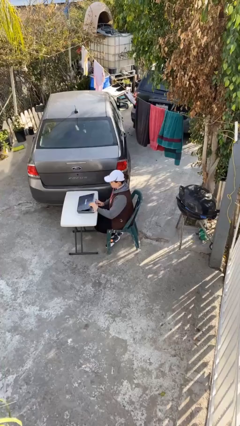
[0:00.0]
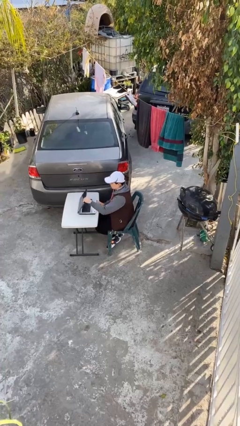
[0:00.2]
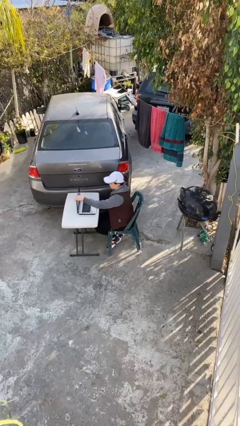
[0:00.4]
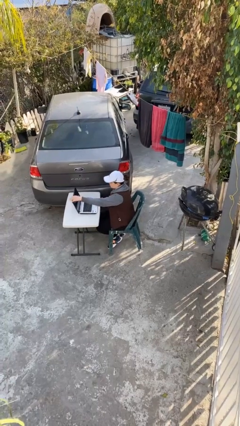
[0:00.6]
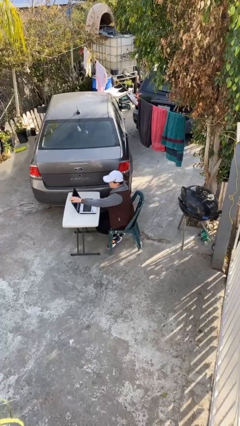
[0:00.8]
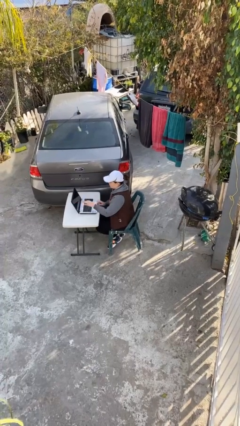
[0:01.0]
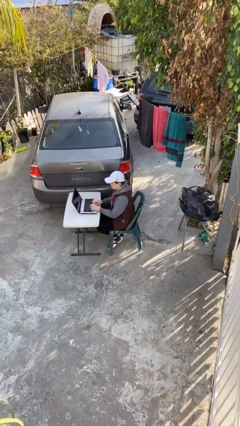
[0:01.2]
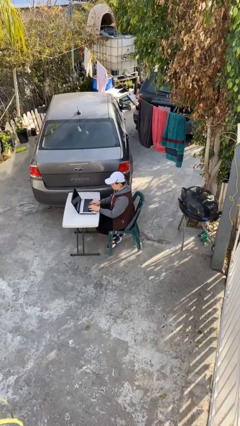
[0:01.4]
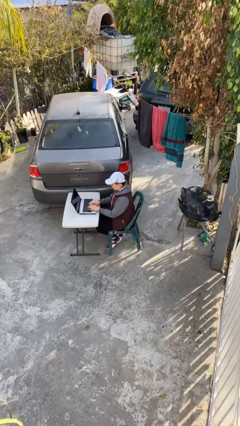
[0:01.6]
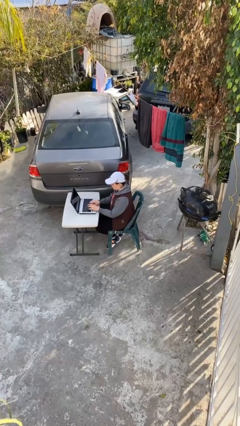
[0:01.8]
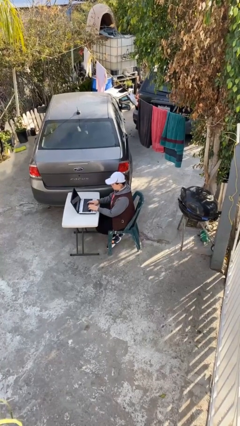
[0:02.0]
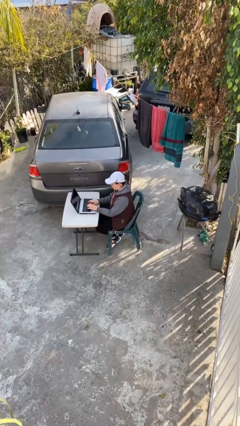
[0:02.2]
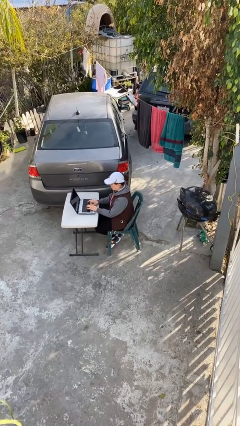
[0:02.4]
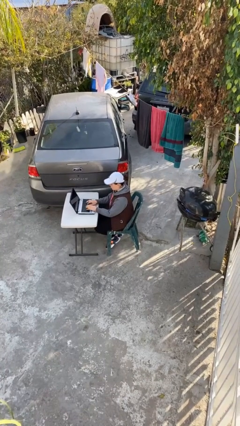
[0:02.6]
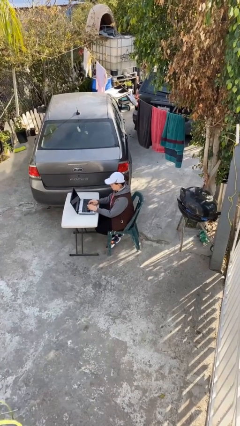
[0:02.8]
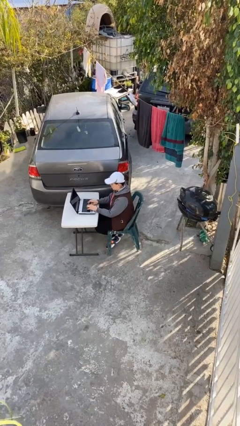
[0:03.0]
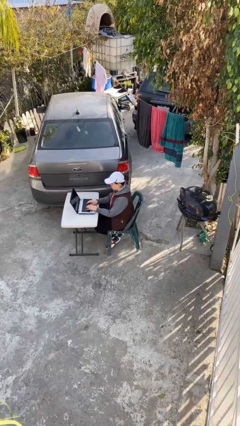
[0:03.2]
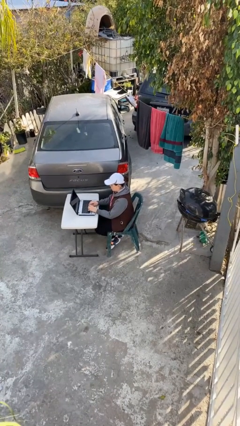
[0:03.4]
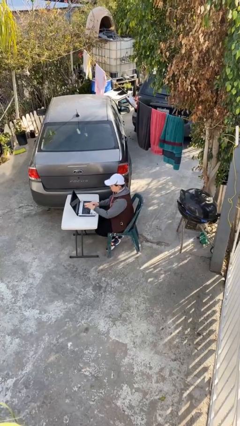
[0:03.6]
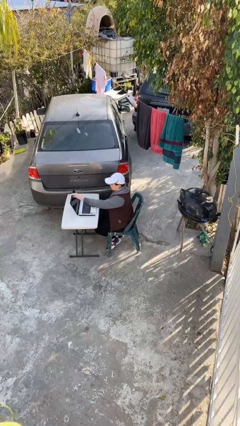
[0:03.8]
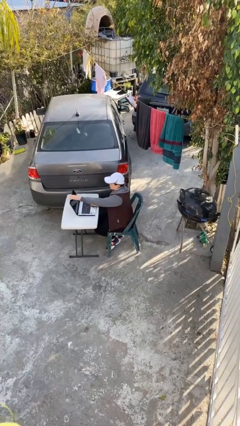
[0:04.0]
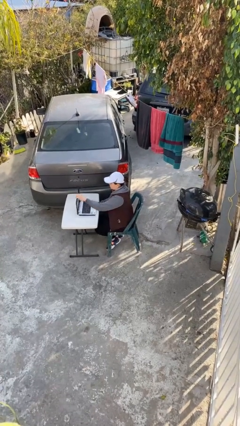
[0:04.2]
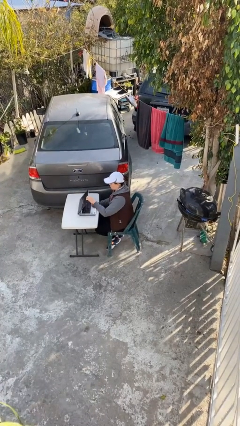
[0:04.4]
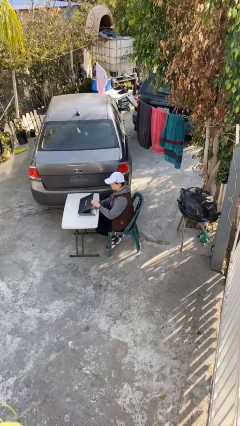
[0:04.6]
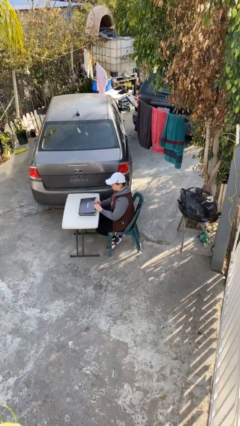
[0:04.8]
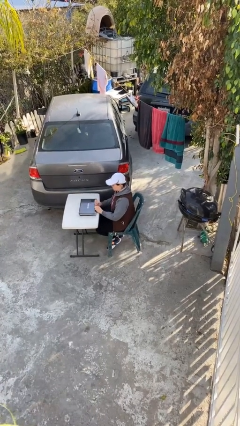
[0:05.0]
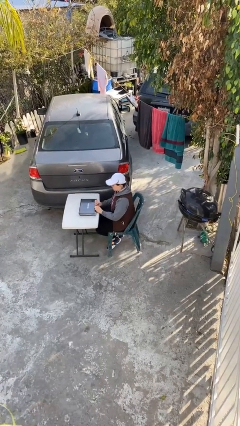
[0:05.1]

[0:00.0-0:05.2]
person interacts with laptop

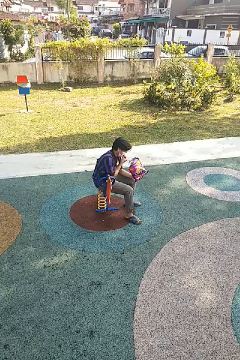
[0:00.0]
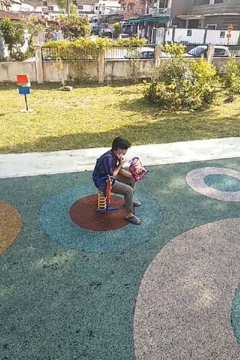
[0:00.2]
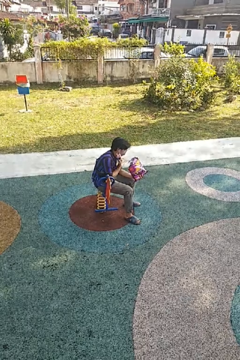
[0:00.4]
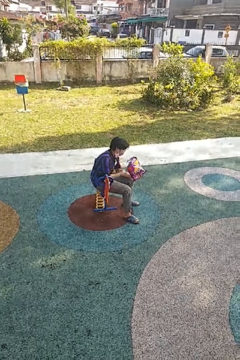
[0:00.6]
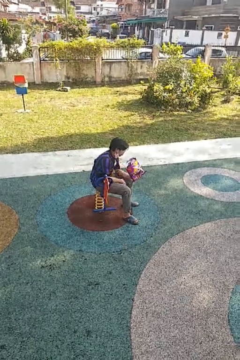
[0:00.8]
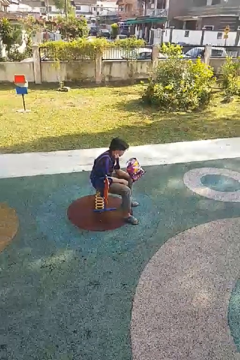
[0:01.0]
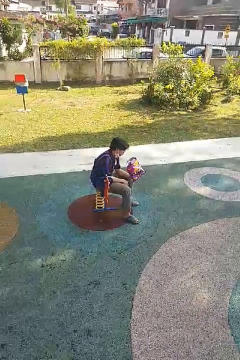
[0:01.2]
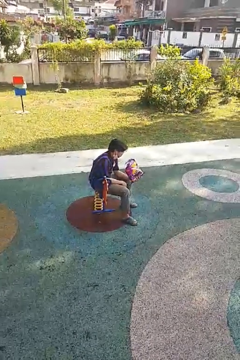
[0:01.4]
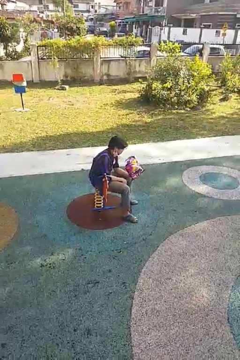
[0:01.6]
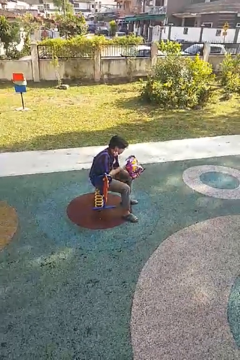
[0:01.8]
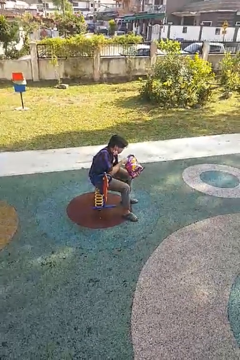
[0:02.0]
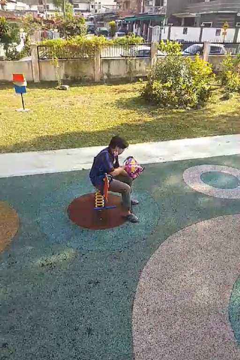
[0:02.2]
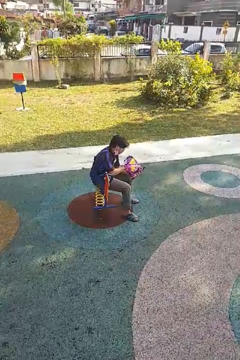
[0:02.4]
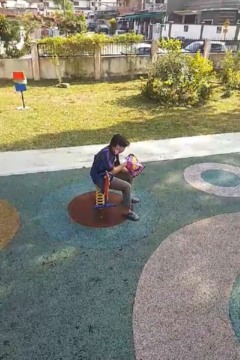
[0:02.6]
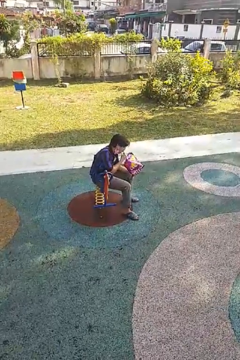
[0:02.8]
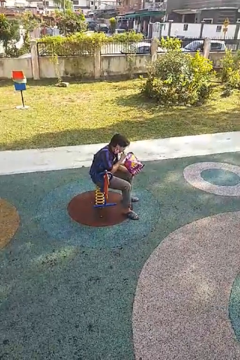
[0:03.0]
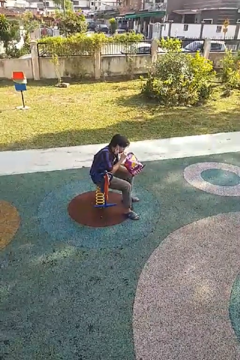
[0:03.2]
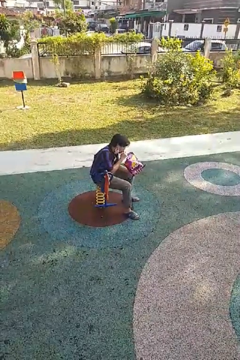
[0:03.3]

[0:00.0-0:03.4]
person eats snack from bag

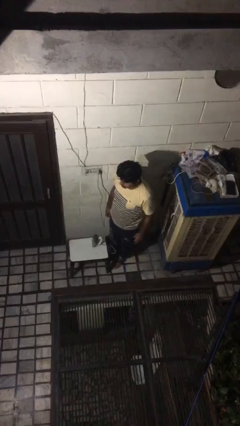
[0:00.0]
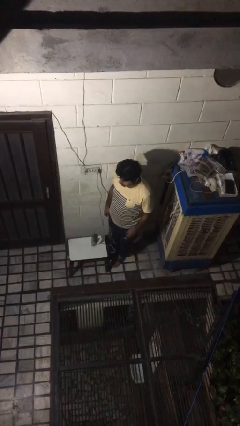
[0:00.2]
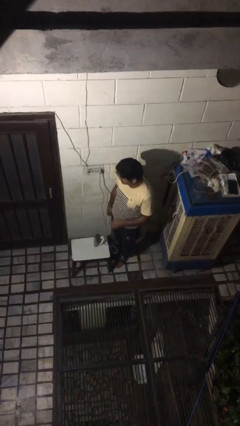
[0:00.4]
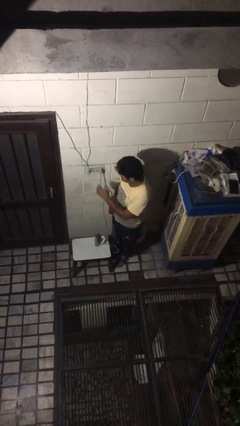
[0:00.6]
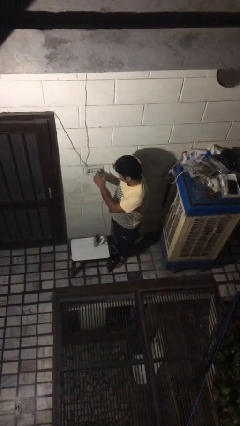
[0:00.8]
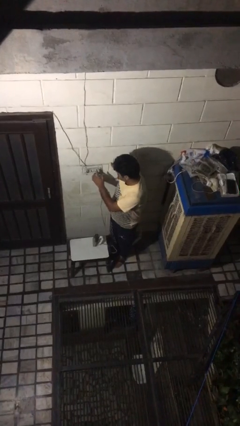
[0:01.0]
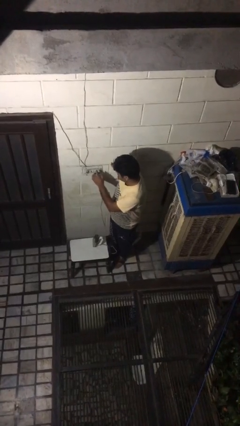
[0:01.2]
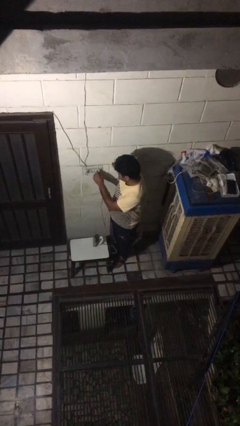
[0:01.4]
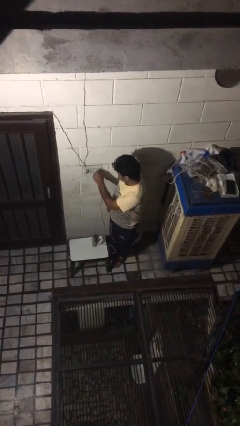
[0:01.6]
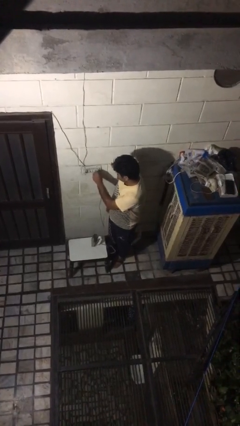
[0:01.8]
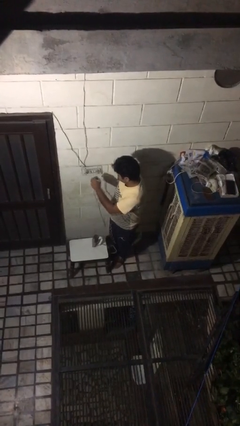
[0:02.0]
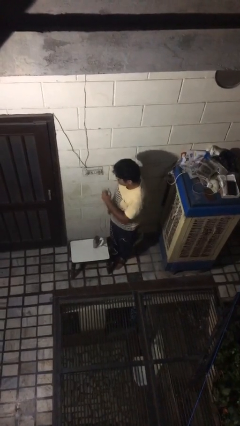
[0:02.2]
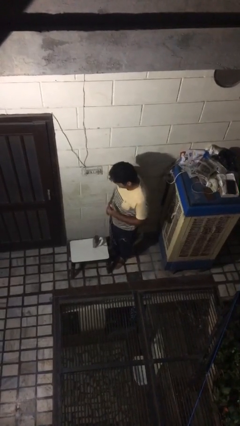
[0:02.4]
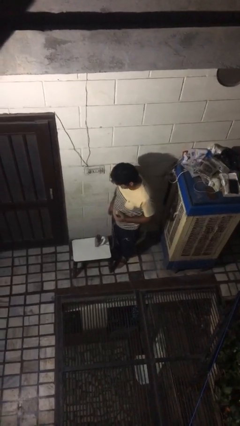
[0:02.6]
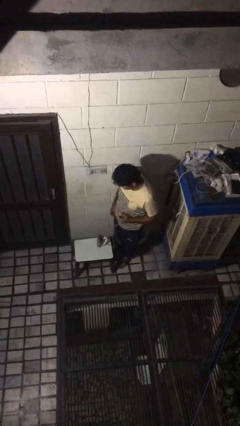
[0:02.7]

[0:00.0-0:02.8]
person unplugs from electrical socket

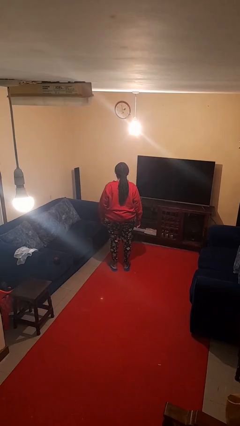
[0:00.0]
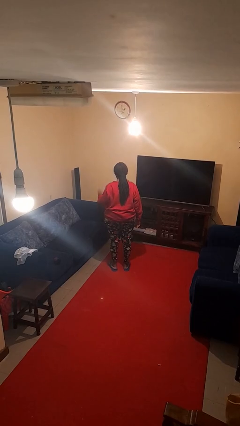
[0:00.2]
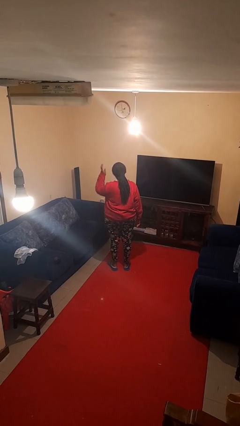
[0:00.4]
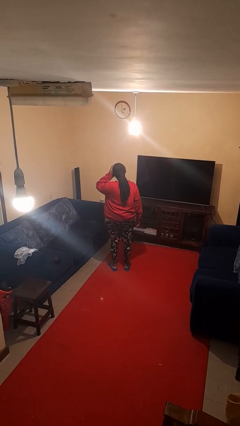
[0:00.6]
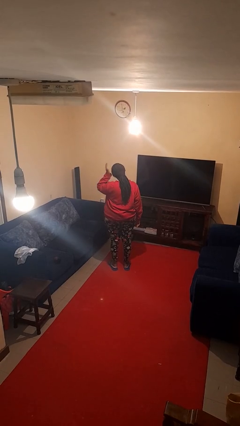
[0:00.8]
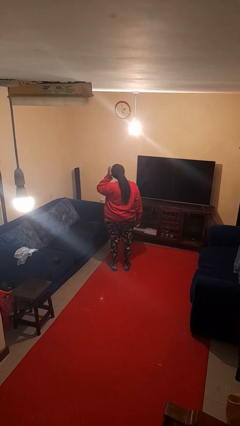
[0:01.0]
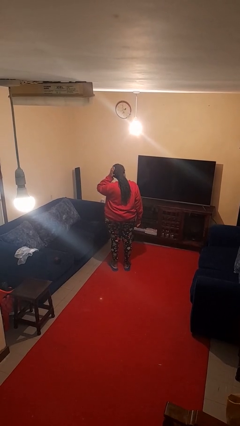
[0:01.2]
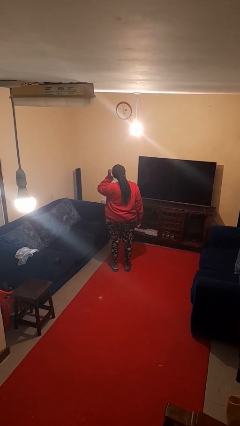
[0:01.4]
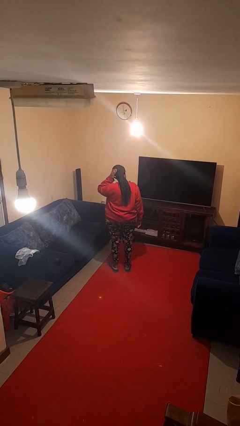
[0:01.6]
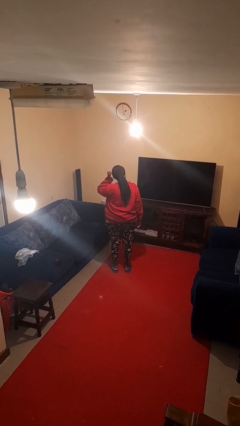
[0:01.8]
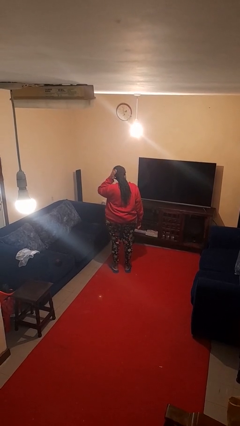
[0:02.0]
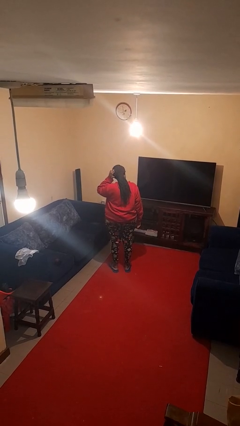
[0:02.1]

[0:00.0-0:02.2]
person pats head

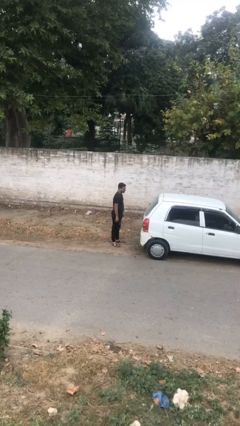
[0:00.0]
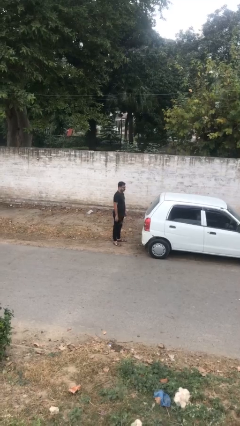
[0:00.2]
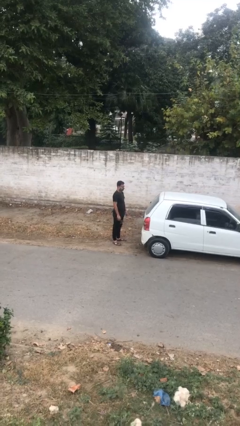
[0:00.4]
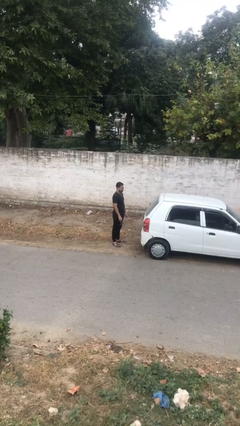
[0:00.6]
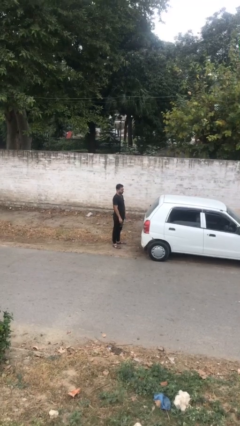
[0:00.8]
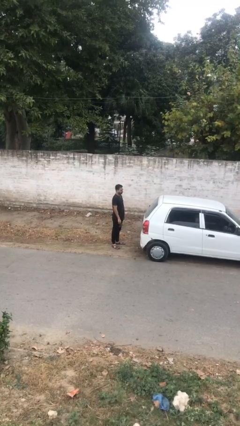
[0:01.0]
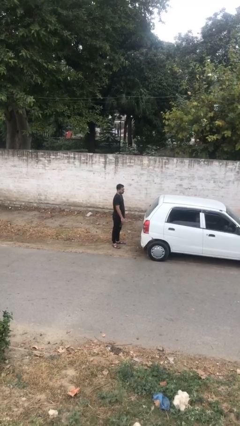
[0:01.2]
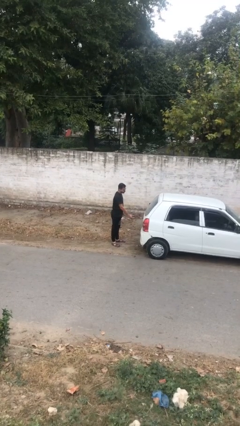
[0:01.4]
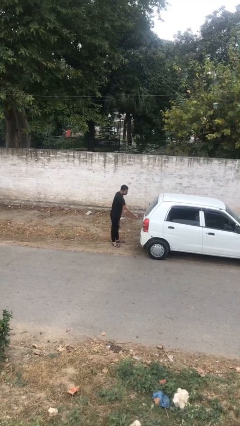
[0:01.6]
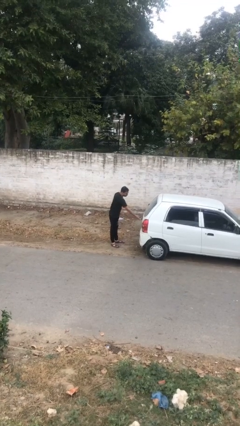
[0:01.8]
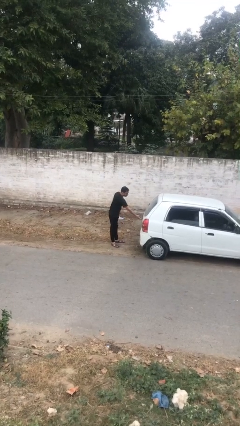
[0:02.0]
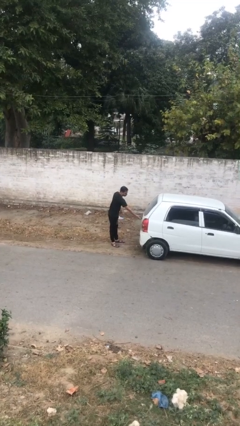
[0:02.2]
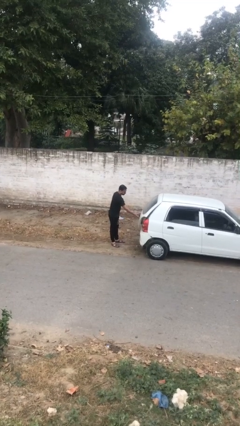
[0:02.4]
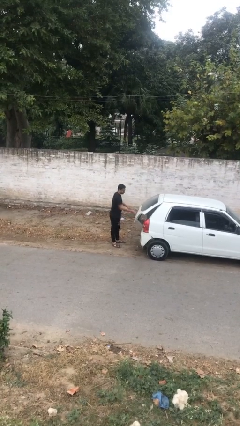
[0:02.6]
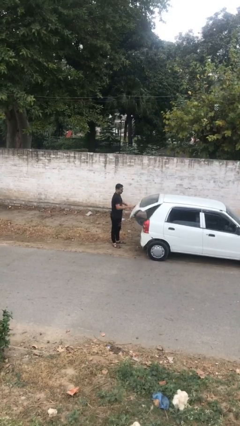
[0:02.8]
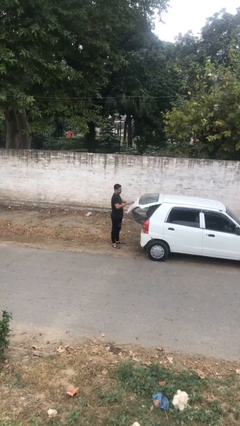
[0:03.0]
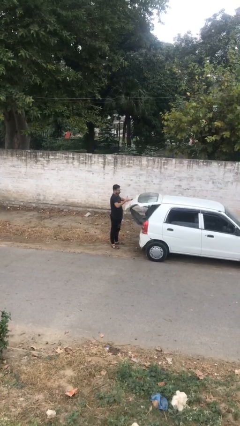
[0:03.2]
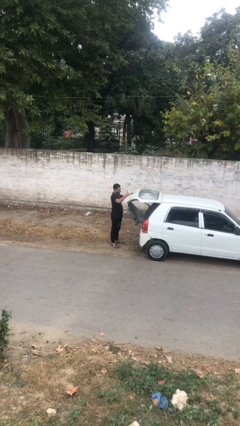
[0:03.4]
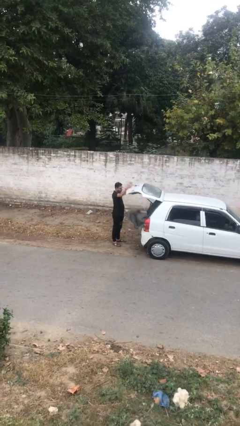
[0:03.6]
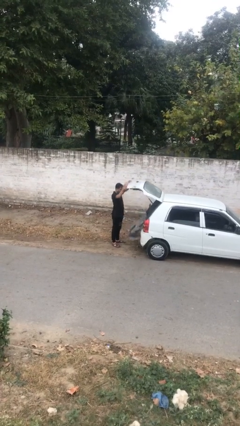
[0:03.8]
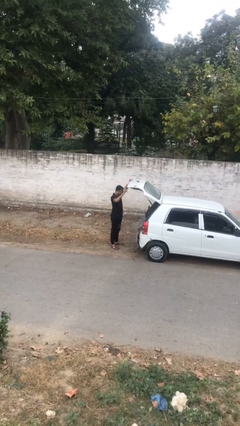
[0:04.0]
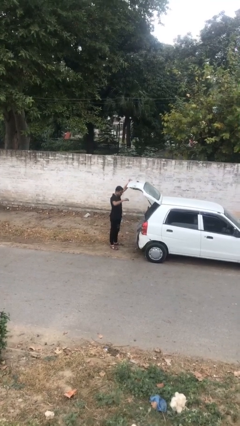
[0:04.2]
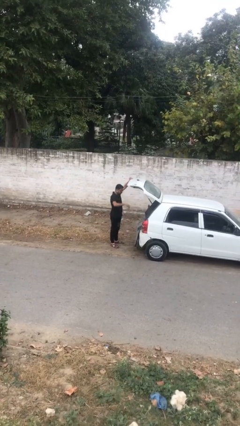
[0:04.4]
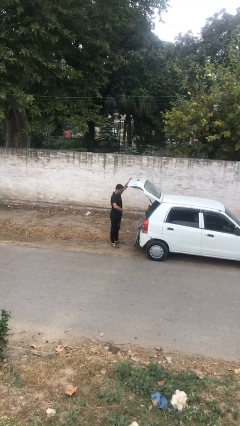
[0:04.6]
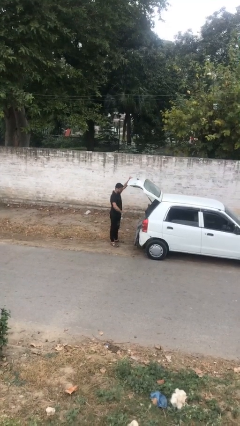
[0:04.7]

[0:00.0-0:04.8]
person opens car trunk
